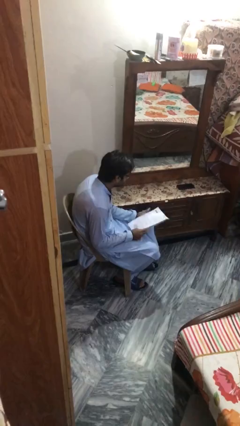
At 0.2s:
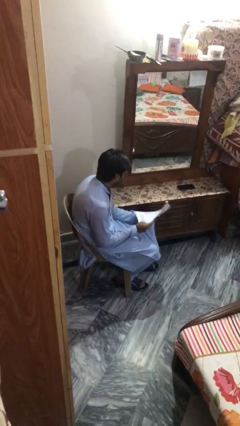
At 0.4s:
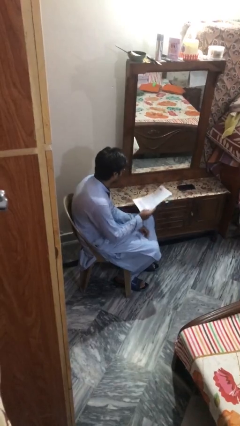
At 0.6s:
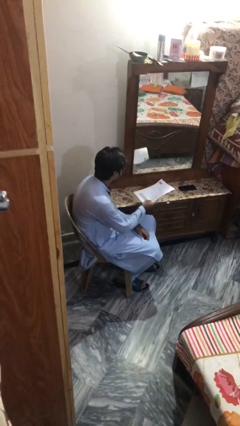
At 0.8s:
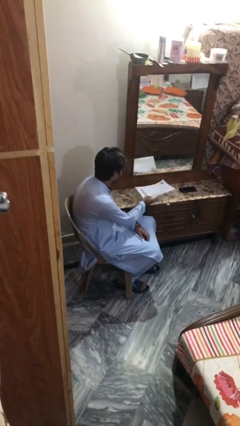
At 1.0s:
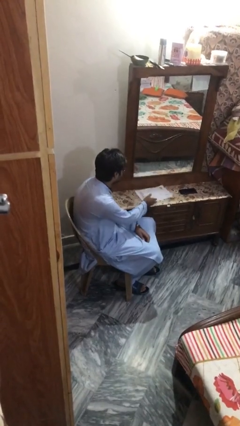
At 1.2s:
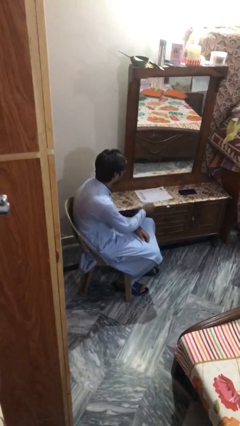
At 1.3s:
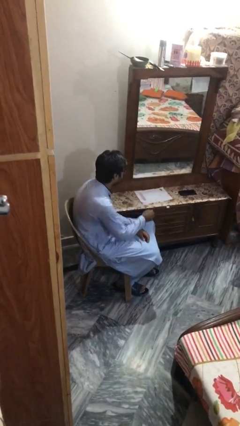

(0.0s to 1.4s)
person puts down object on table

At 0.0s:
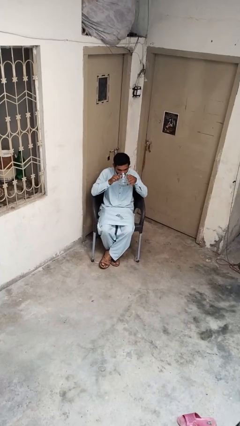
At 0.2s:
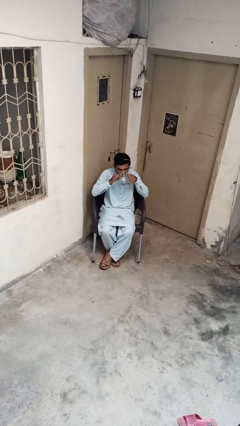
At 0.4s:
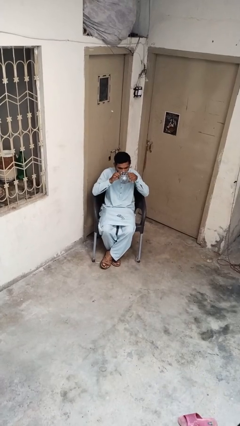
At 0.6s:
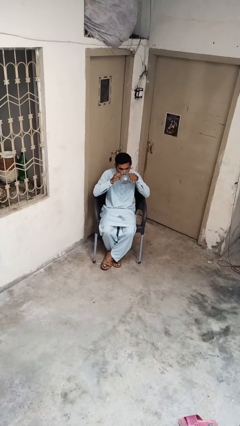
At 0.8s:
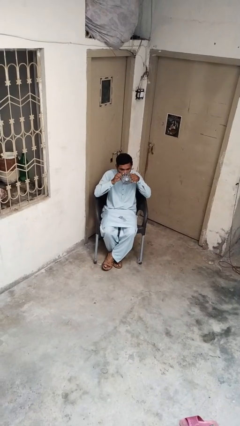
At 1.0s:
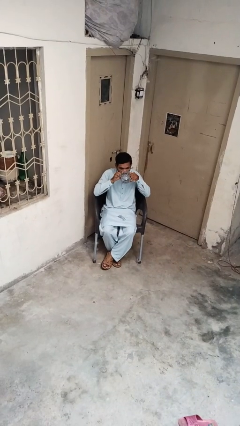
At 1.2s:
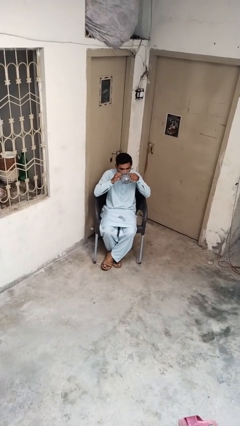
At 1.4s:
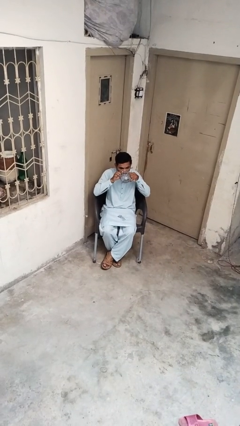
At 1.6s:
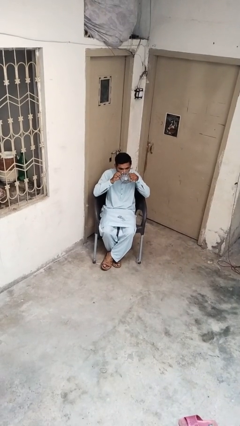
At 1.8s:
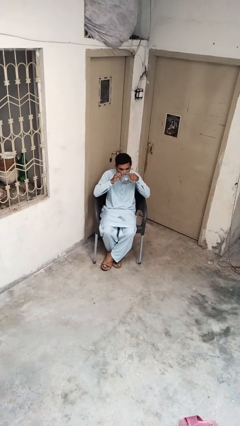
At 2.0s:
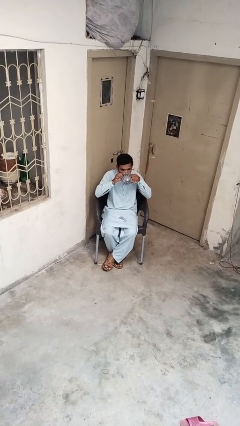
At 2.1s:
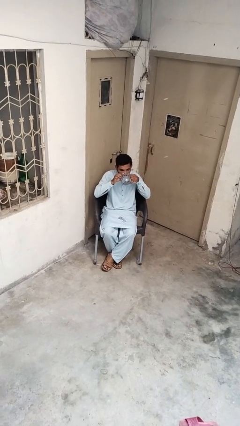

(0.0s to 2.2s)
person drinks from cup

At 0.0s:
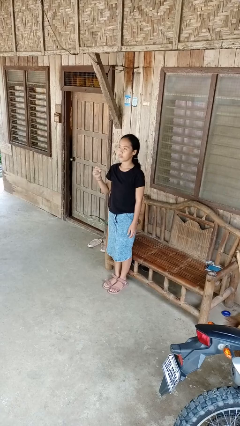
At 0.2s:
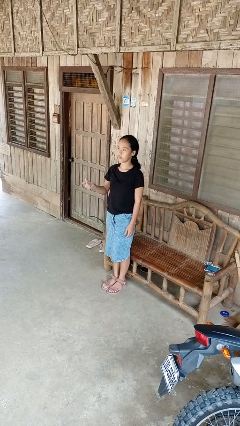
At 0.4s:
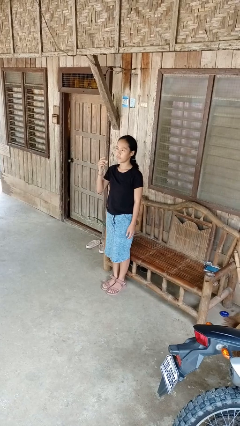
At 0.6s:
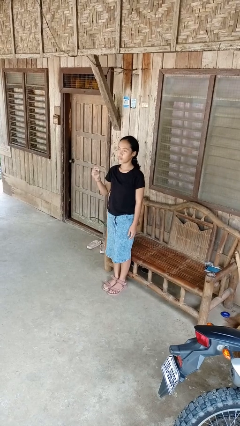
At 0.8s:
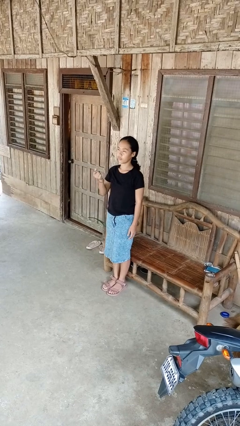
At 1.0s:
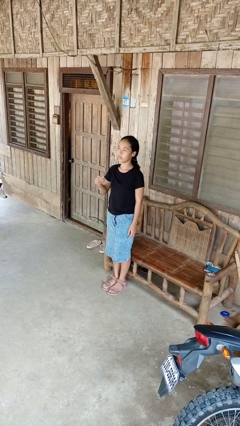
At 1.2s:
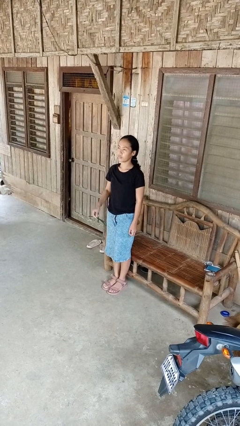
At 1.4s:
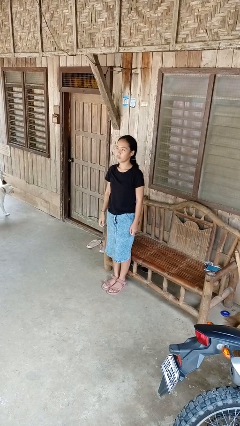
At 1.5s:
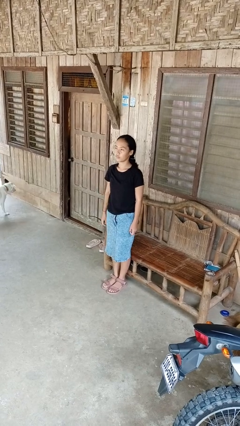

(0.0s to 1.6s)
person snaps fingers

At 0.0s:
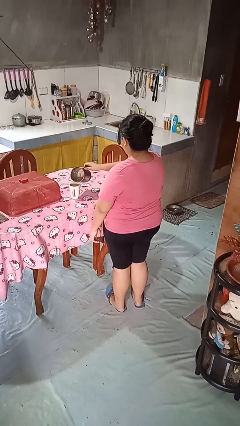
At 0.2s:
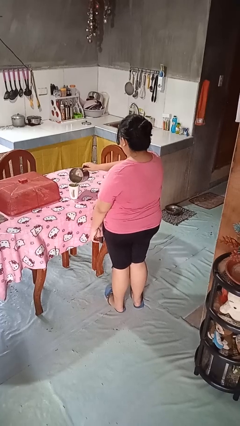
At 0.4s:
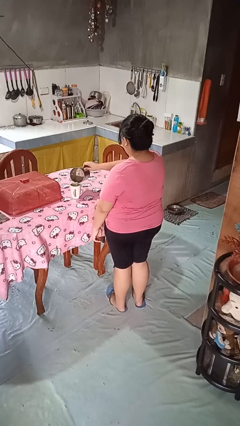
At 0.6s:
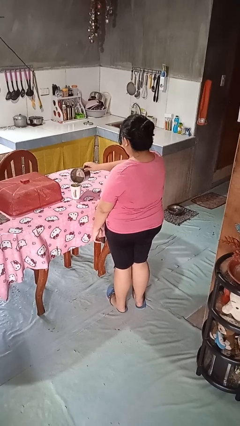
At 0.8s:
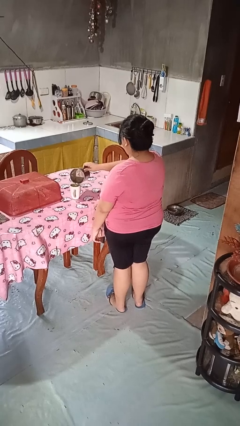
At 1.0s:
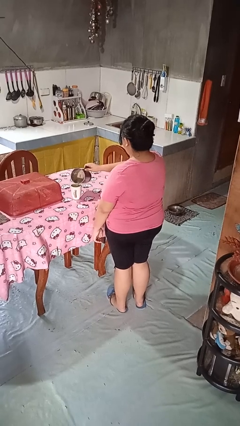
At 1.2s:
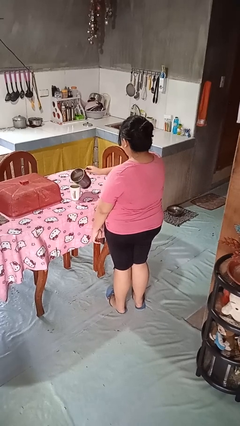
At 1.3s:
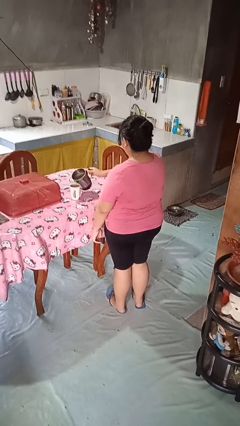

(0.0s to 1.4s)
person pours coffee into mug

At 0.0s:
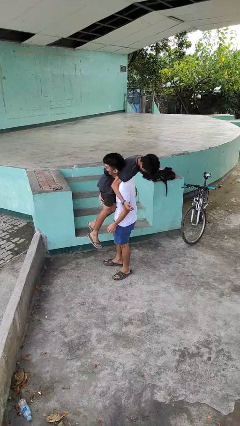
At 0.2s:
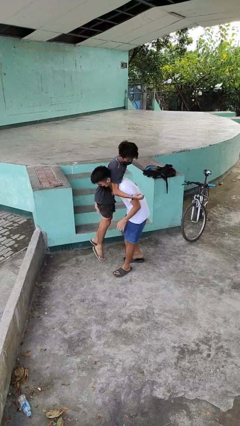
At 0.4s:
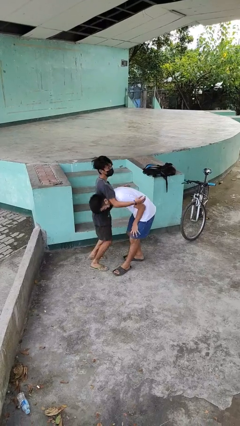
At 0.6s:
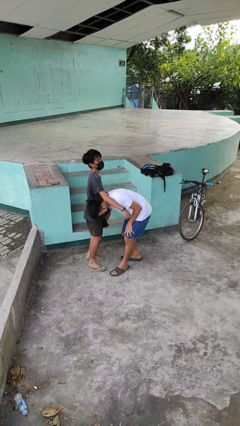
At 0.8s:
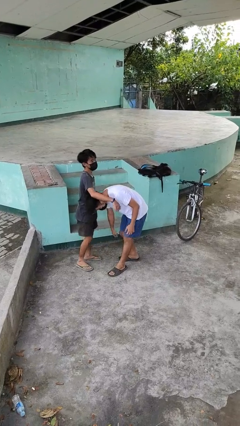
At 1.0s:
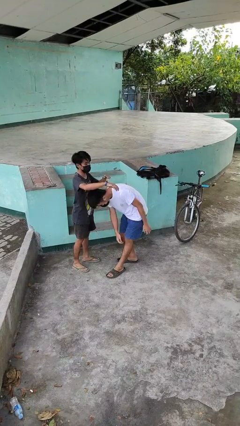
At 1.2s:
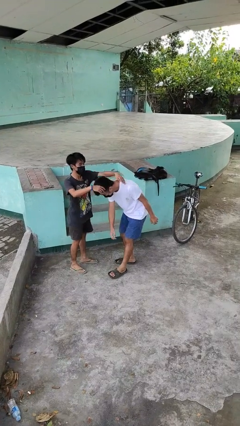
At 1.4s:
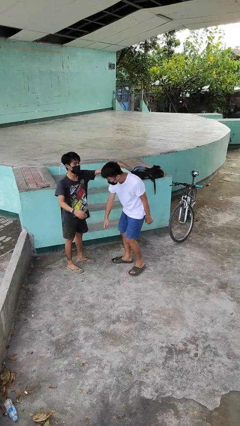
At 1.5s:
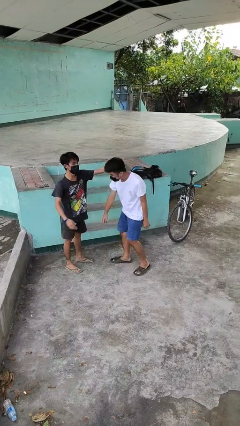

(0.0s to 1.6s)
person puts down person

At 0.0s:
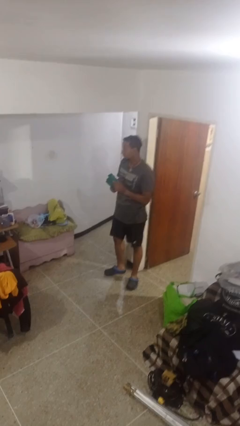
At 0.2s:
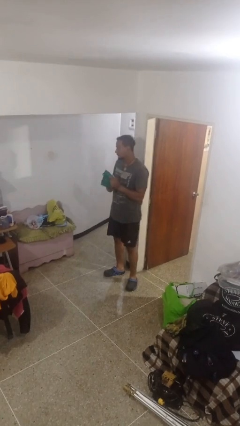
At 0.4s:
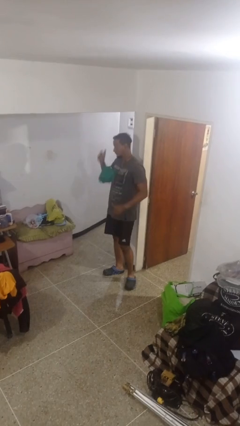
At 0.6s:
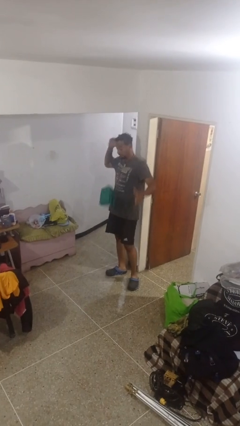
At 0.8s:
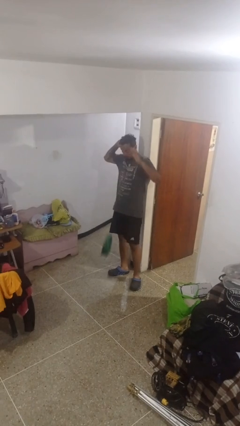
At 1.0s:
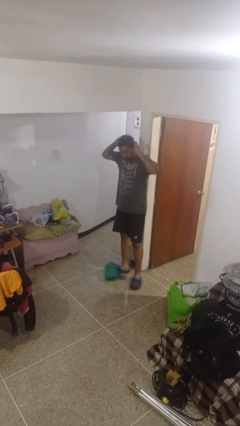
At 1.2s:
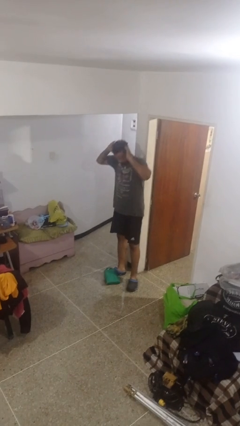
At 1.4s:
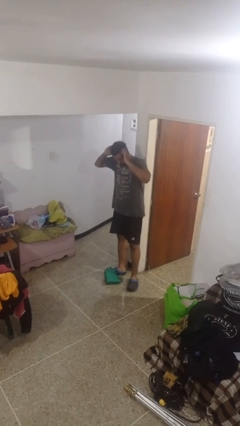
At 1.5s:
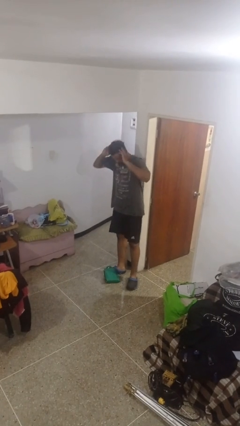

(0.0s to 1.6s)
person drops object

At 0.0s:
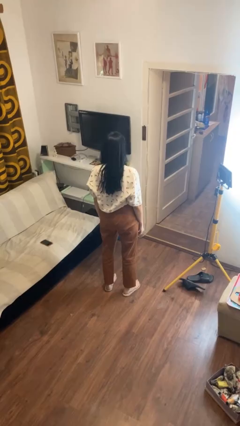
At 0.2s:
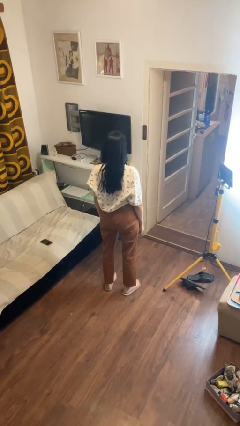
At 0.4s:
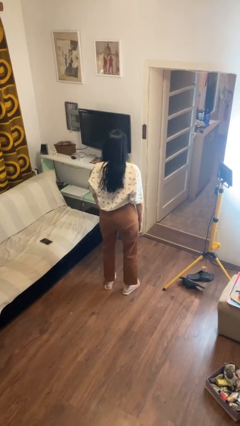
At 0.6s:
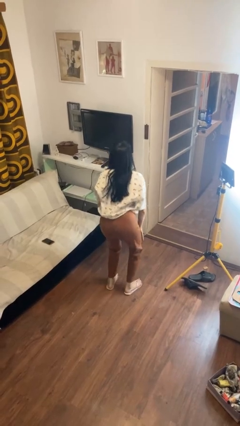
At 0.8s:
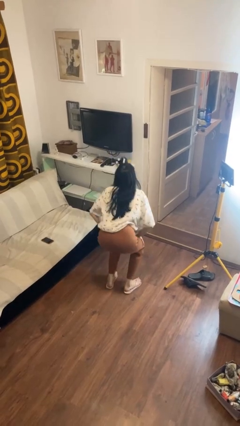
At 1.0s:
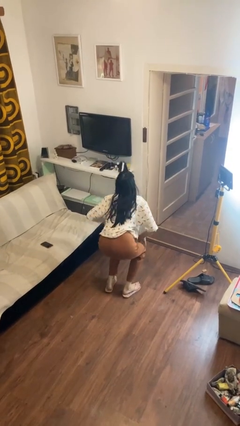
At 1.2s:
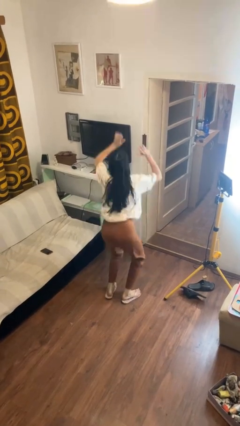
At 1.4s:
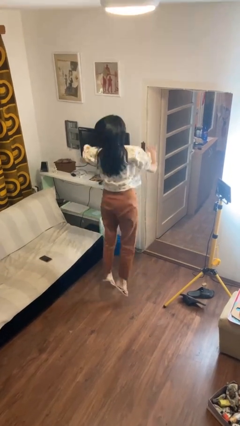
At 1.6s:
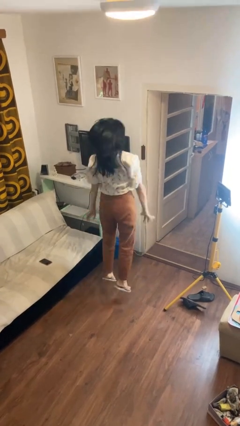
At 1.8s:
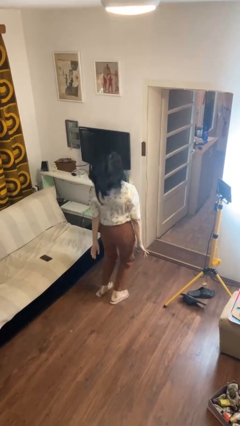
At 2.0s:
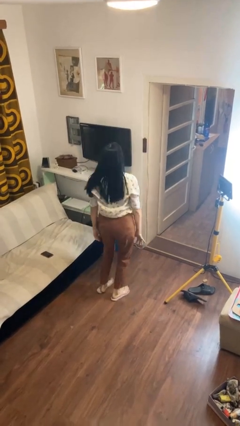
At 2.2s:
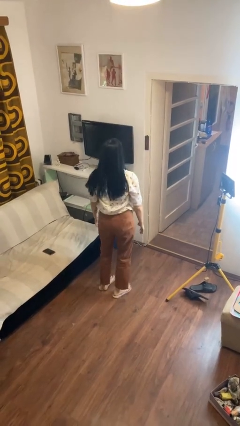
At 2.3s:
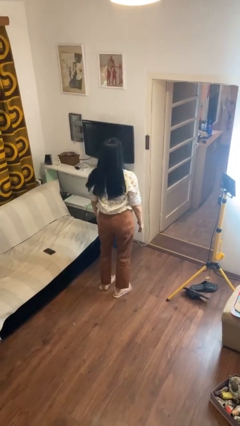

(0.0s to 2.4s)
person jumps

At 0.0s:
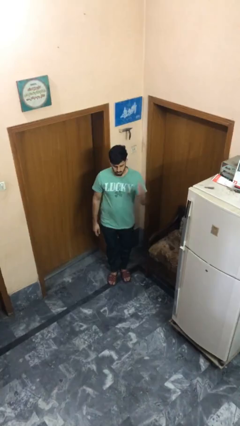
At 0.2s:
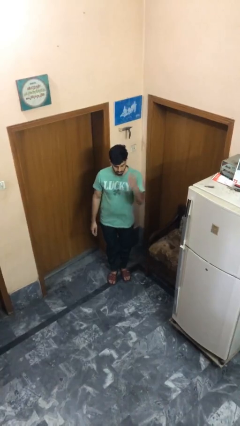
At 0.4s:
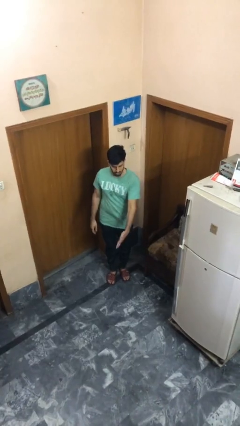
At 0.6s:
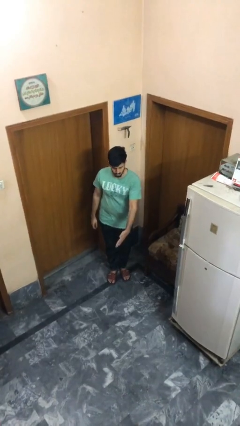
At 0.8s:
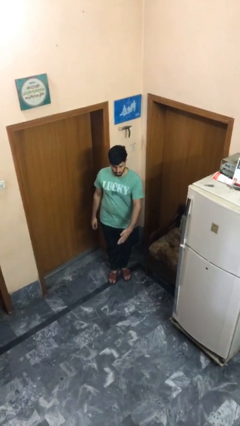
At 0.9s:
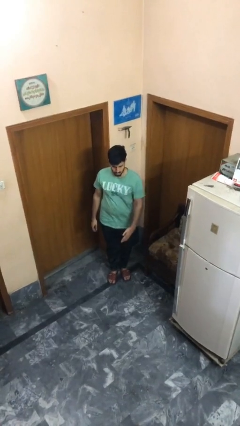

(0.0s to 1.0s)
person karate chop

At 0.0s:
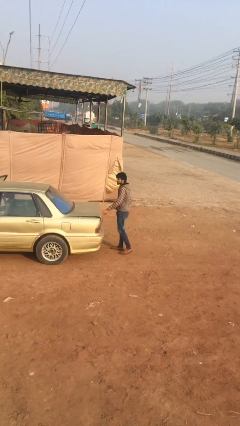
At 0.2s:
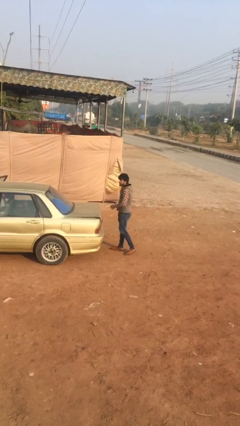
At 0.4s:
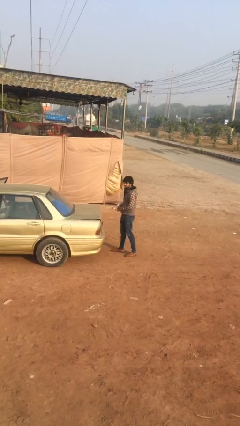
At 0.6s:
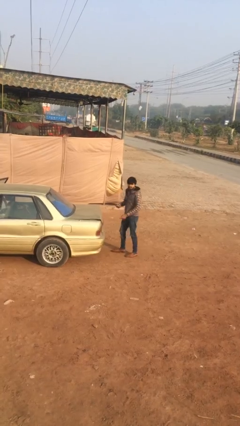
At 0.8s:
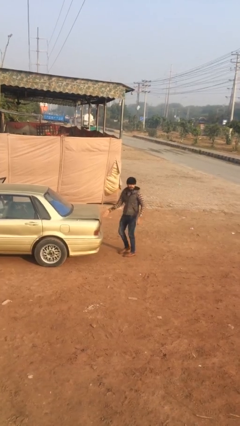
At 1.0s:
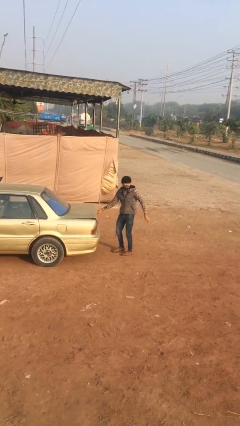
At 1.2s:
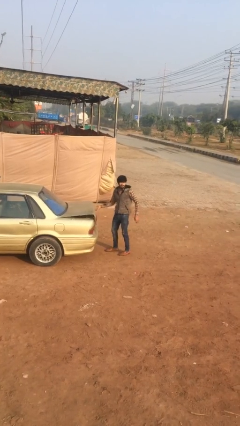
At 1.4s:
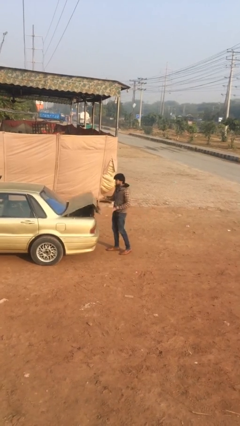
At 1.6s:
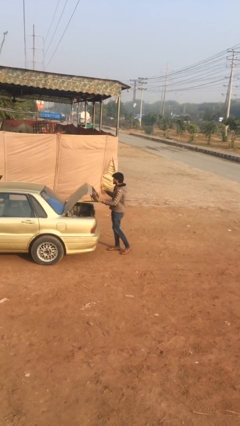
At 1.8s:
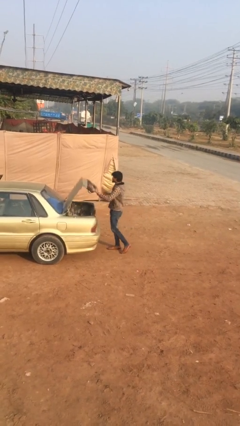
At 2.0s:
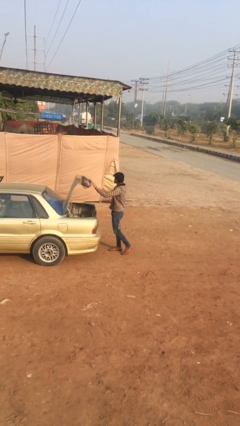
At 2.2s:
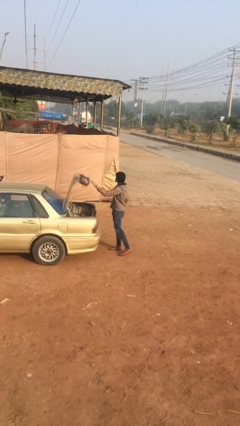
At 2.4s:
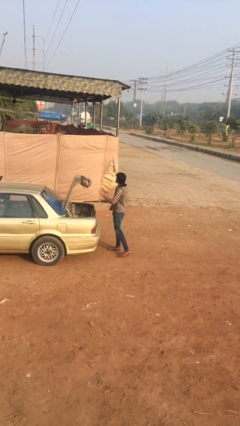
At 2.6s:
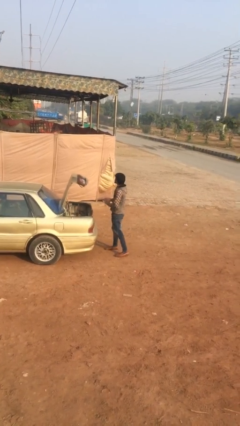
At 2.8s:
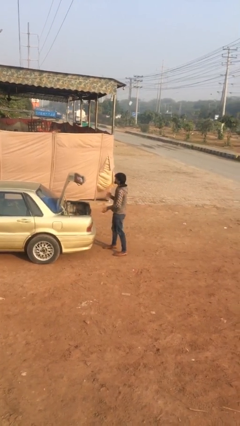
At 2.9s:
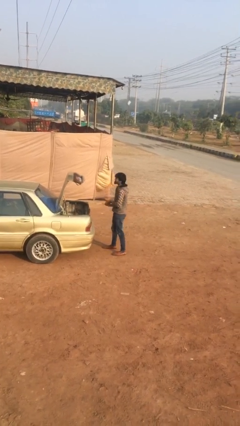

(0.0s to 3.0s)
person opens car trunk

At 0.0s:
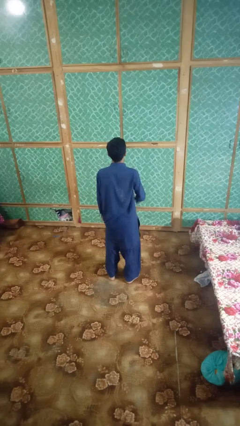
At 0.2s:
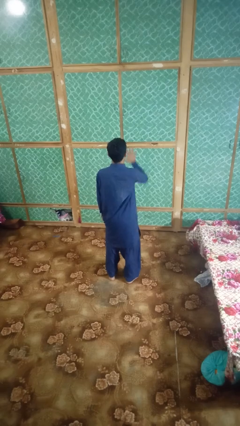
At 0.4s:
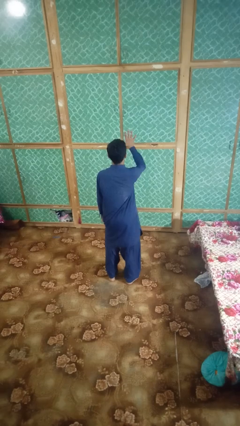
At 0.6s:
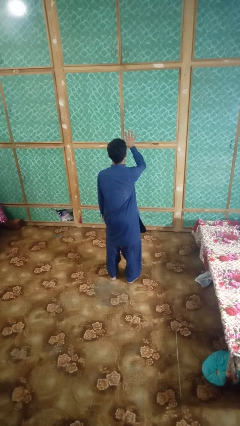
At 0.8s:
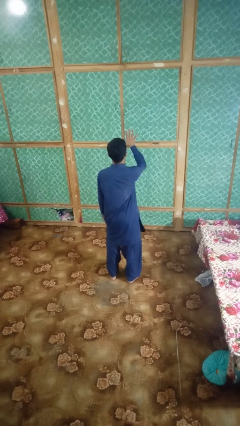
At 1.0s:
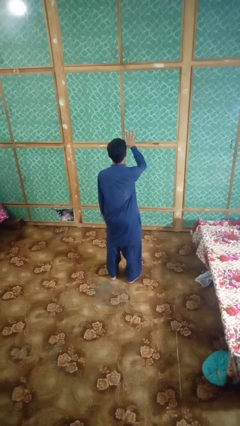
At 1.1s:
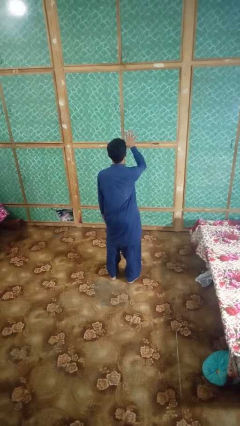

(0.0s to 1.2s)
person gestures number five
